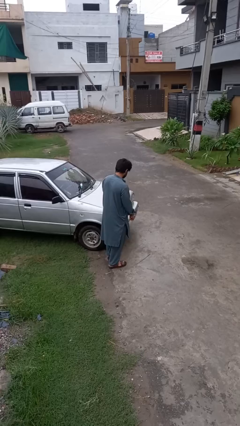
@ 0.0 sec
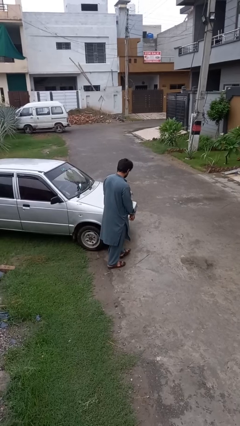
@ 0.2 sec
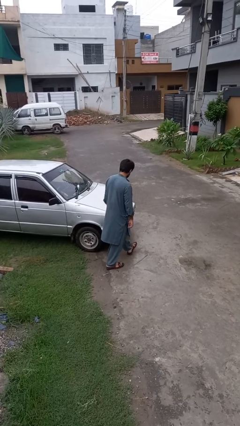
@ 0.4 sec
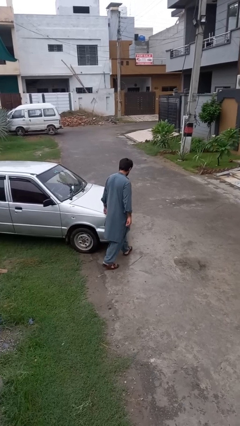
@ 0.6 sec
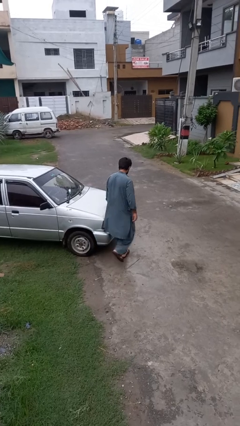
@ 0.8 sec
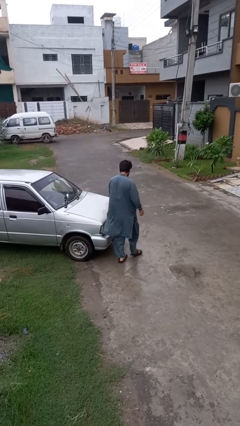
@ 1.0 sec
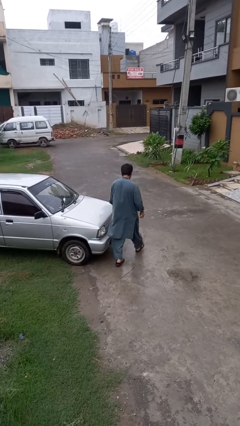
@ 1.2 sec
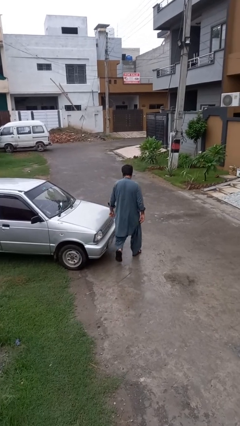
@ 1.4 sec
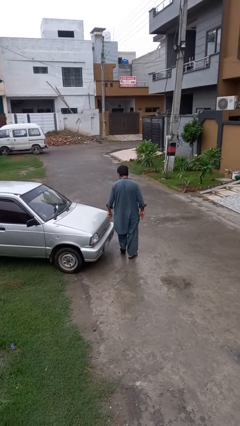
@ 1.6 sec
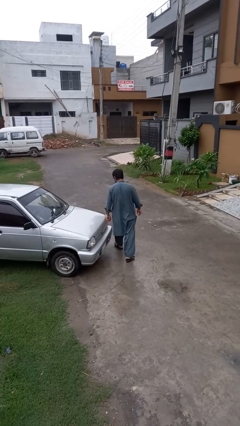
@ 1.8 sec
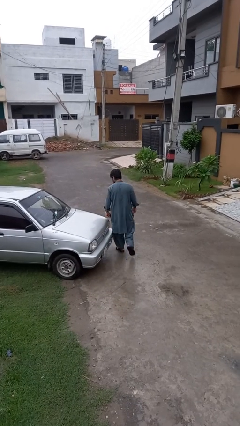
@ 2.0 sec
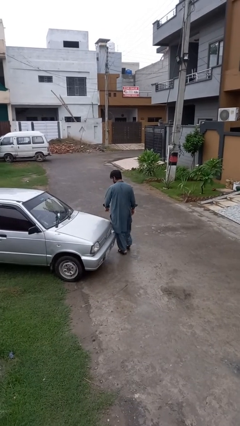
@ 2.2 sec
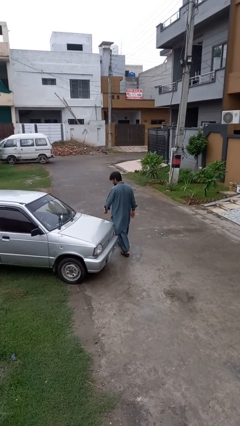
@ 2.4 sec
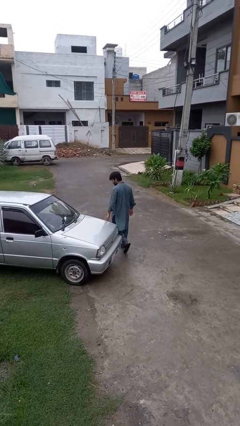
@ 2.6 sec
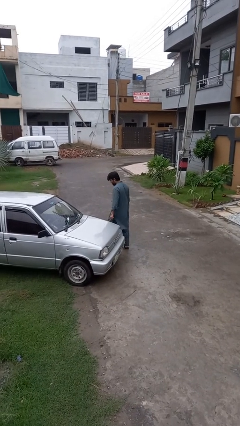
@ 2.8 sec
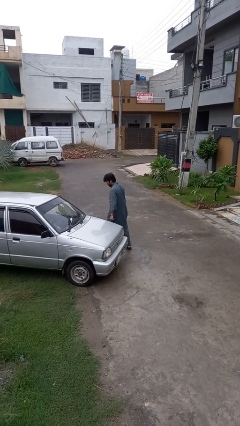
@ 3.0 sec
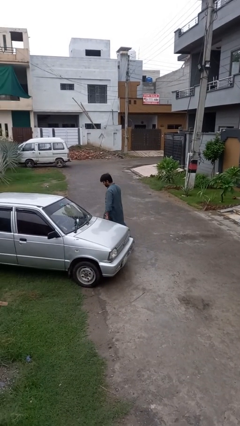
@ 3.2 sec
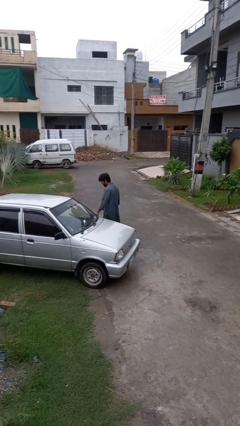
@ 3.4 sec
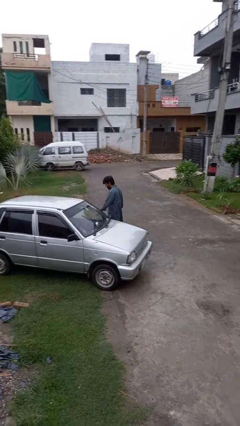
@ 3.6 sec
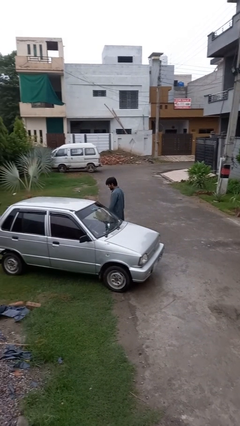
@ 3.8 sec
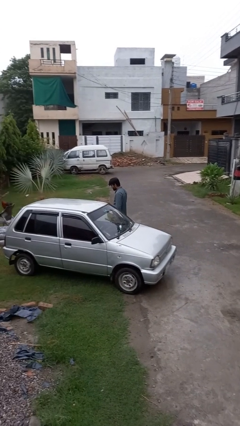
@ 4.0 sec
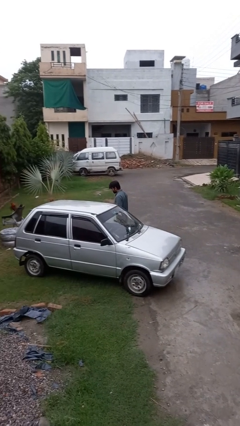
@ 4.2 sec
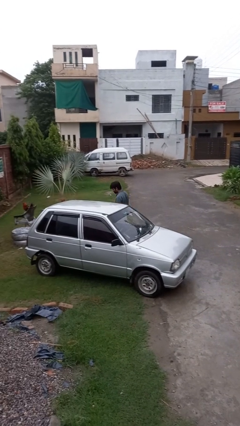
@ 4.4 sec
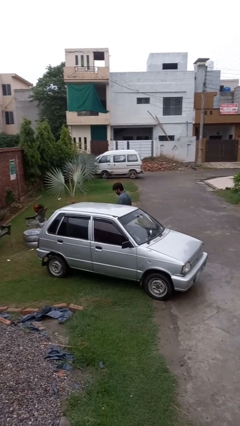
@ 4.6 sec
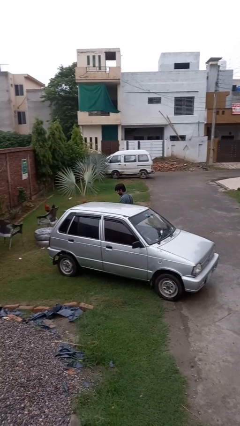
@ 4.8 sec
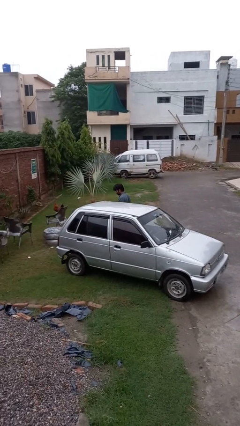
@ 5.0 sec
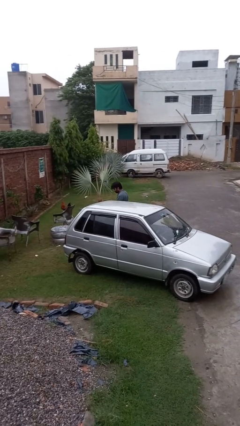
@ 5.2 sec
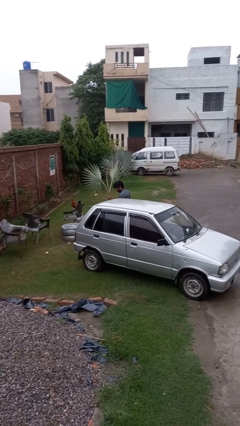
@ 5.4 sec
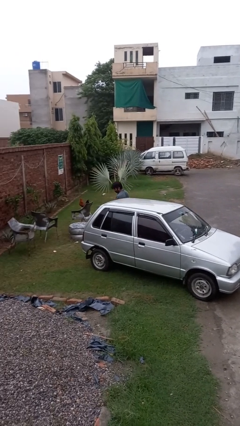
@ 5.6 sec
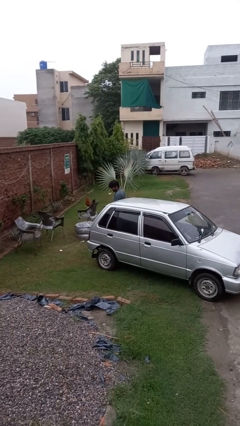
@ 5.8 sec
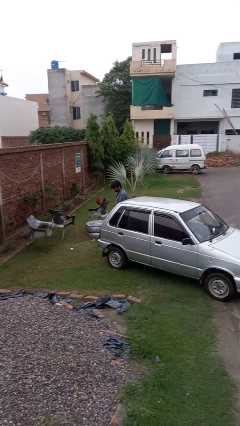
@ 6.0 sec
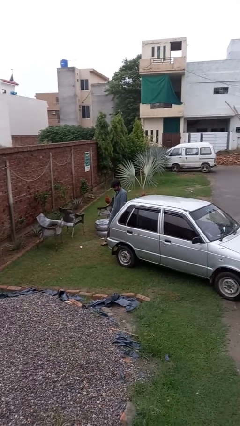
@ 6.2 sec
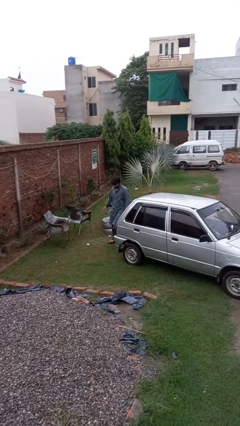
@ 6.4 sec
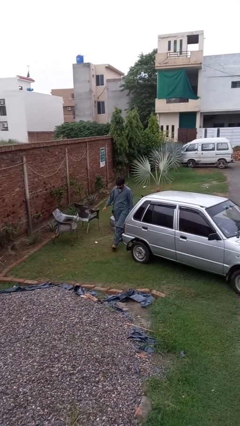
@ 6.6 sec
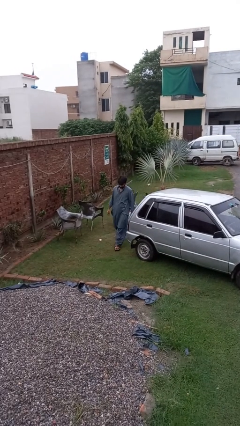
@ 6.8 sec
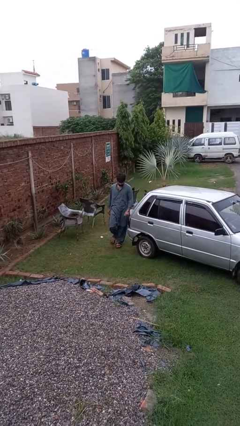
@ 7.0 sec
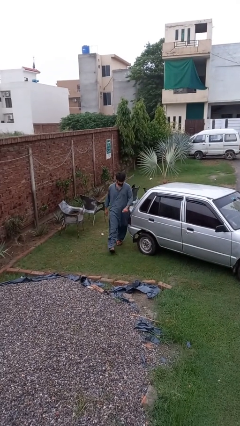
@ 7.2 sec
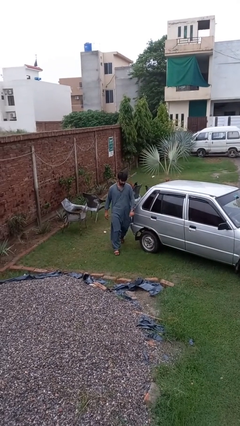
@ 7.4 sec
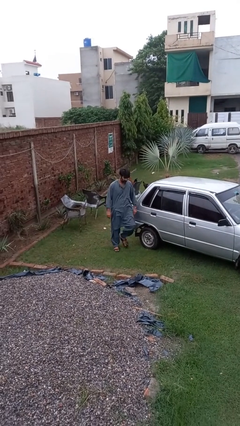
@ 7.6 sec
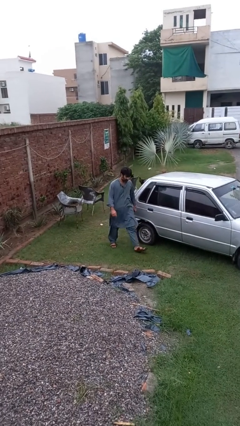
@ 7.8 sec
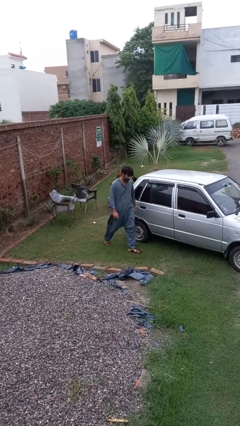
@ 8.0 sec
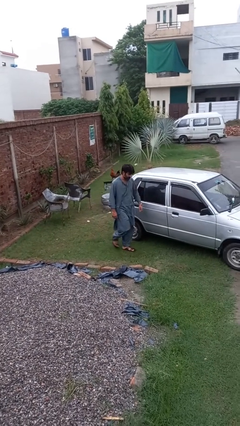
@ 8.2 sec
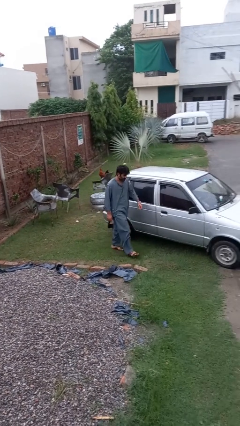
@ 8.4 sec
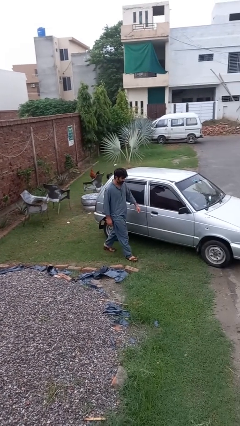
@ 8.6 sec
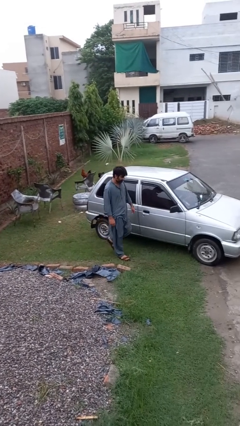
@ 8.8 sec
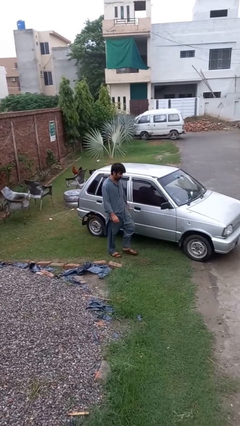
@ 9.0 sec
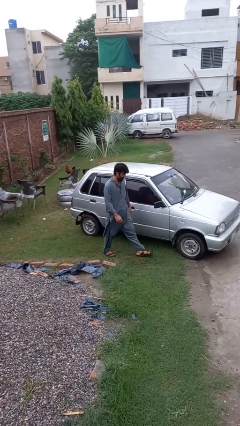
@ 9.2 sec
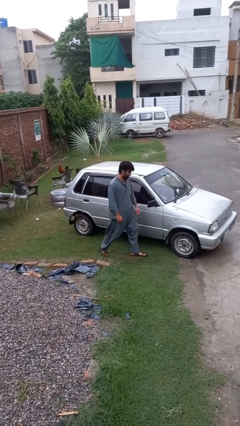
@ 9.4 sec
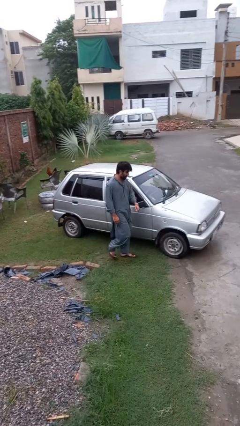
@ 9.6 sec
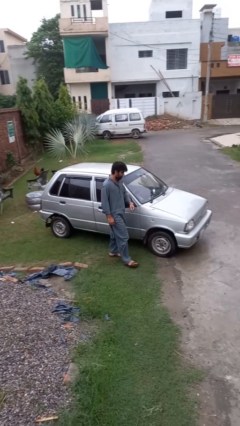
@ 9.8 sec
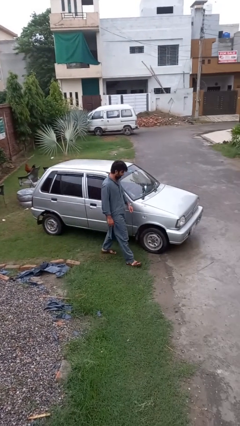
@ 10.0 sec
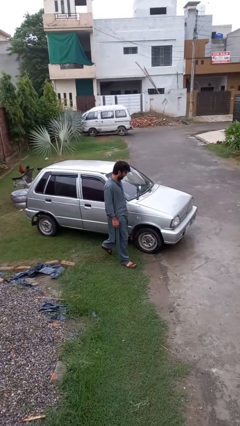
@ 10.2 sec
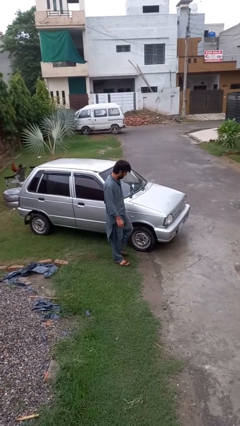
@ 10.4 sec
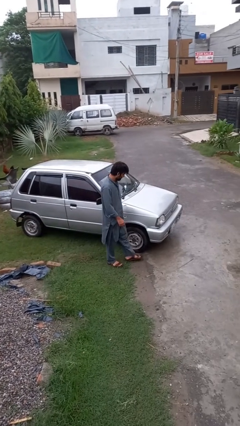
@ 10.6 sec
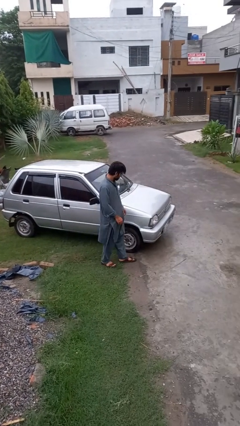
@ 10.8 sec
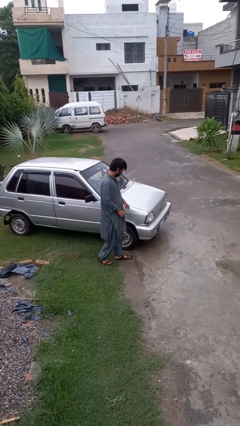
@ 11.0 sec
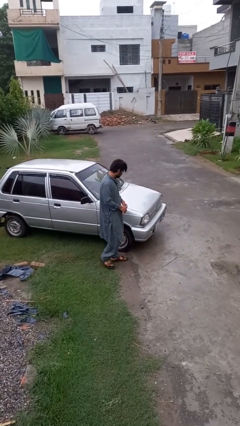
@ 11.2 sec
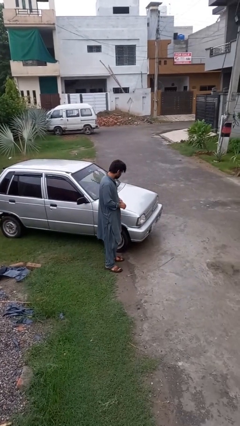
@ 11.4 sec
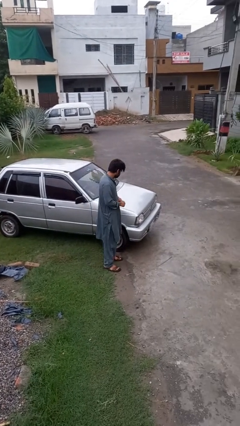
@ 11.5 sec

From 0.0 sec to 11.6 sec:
person walks around car

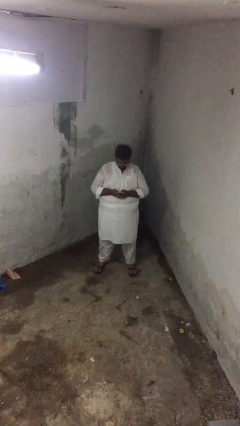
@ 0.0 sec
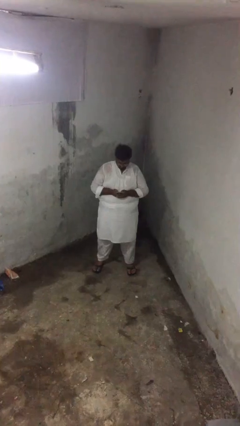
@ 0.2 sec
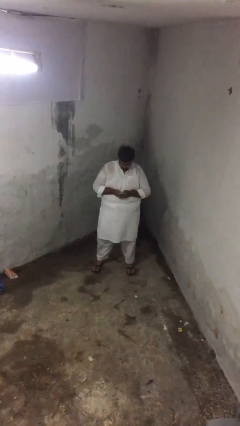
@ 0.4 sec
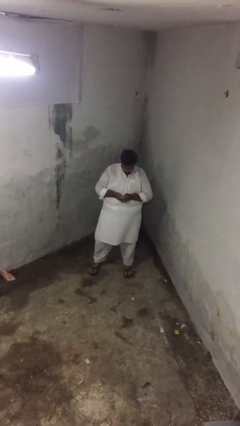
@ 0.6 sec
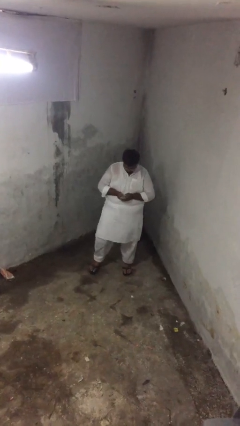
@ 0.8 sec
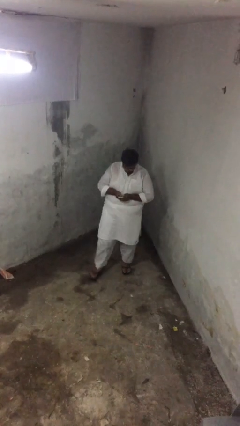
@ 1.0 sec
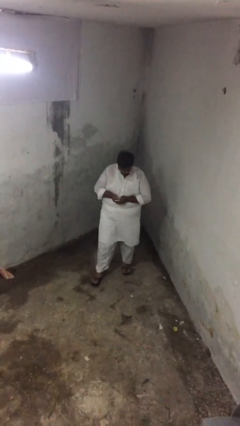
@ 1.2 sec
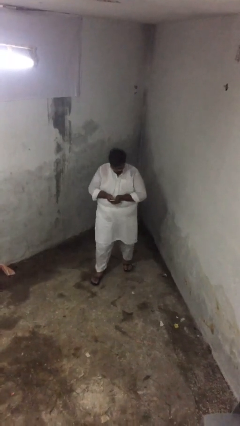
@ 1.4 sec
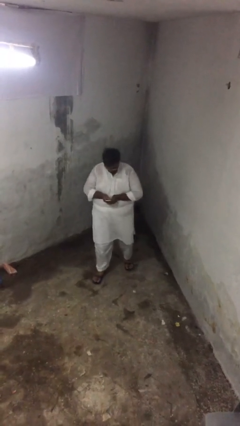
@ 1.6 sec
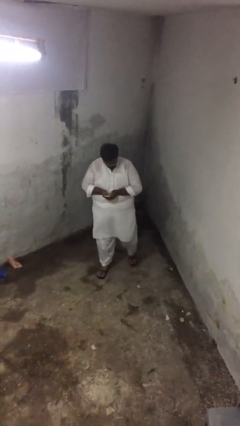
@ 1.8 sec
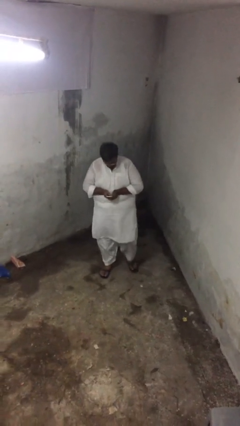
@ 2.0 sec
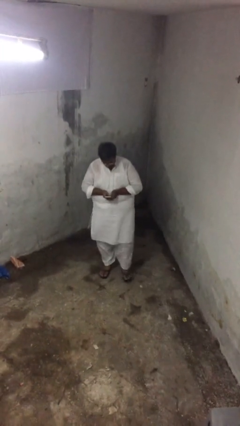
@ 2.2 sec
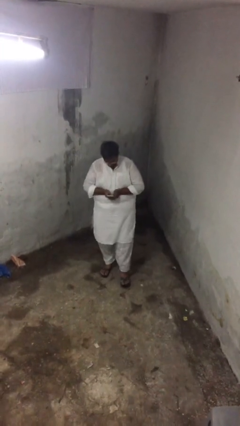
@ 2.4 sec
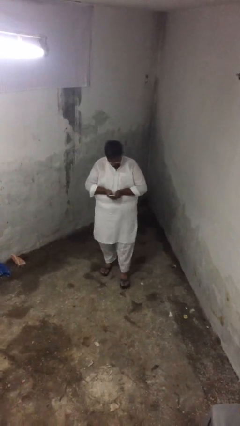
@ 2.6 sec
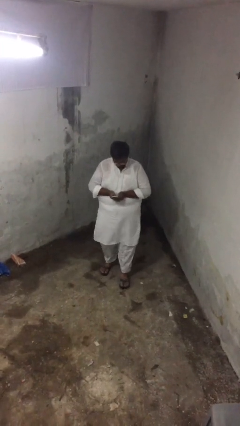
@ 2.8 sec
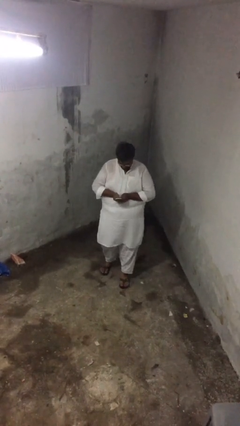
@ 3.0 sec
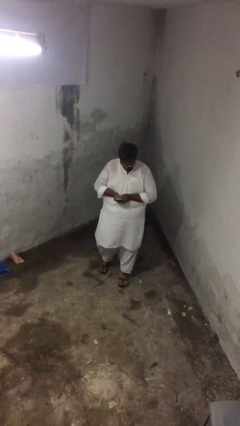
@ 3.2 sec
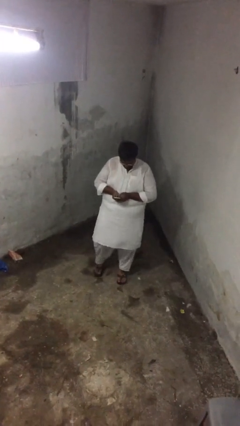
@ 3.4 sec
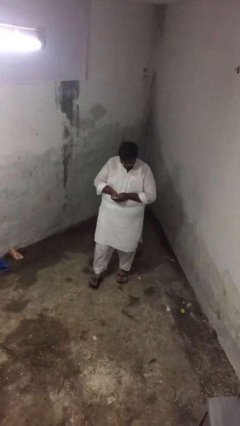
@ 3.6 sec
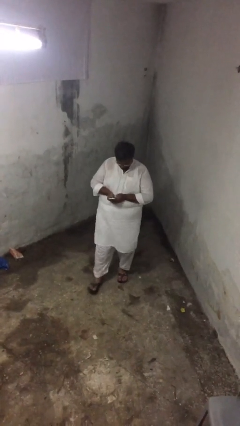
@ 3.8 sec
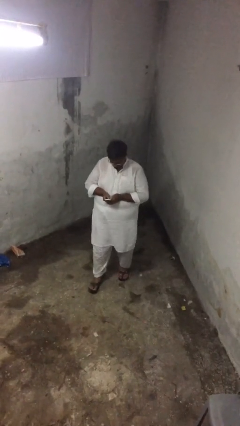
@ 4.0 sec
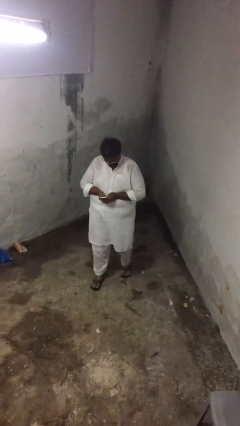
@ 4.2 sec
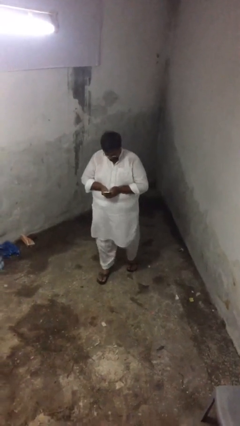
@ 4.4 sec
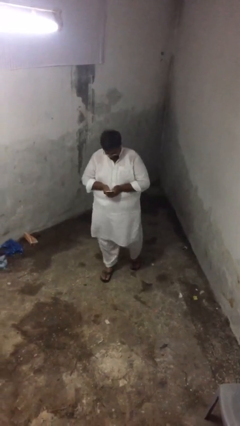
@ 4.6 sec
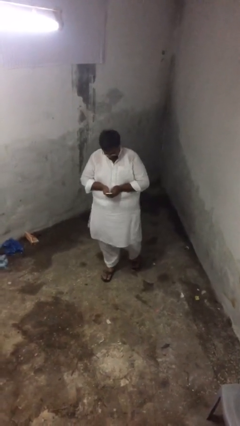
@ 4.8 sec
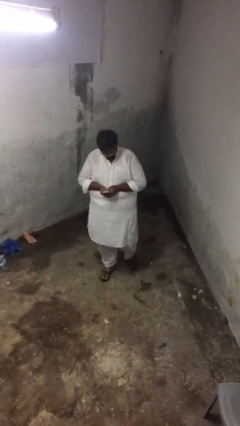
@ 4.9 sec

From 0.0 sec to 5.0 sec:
person texts on phone

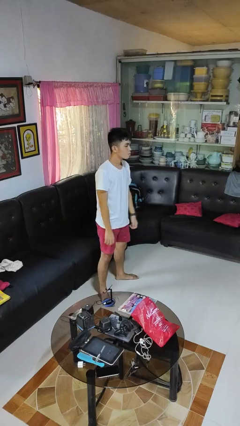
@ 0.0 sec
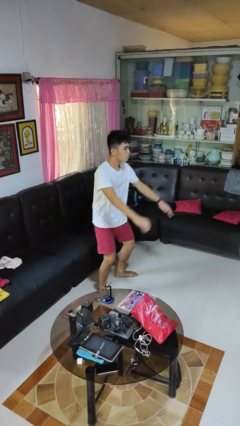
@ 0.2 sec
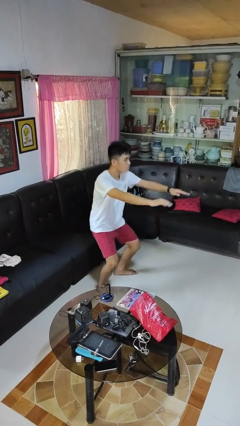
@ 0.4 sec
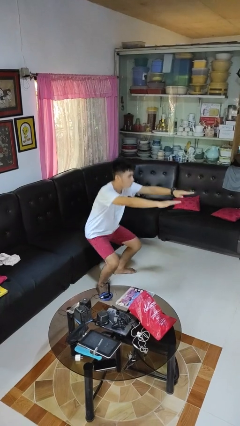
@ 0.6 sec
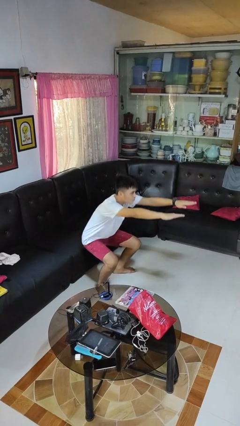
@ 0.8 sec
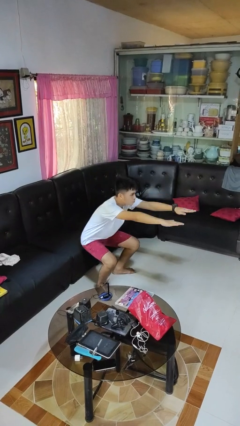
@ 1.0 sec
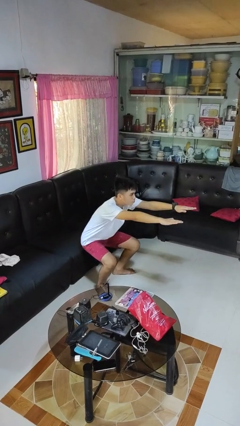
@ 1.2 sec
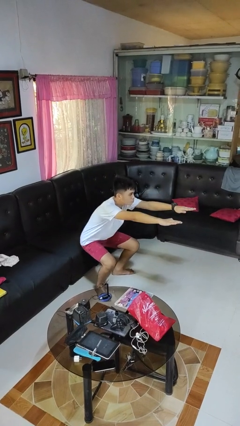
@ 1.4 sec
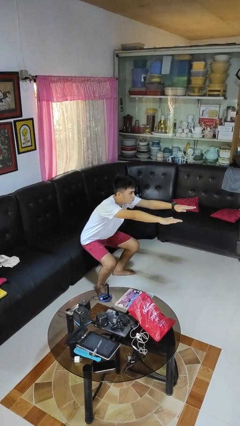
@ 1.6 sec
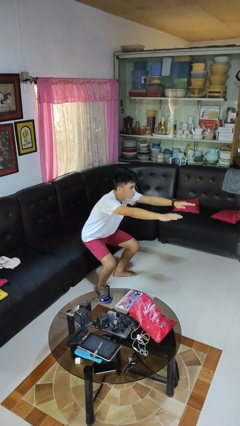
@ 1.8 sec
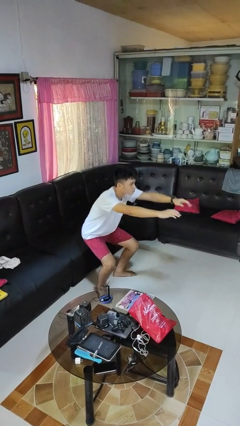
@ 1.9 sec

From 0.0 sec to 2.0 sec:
person squats
